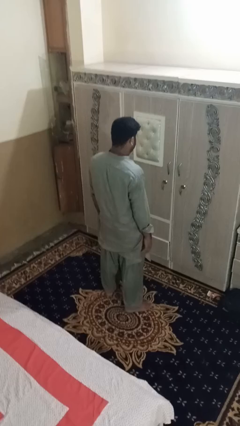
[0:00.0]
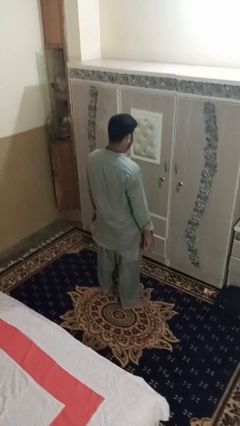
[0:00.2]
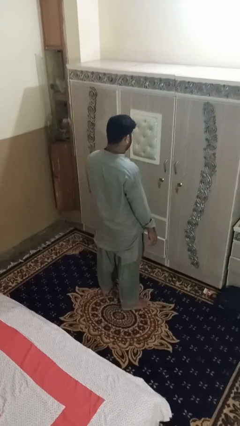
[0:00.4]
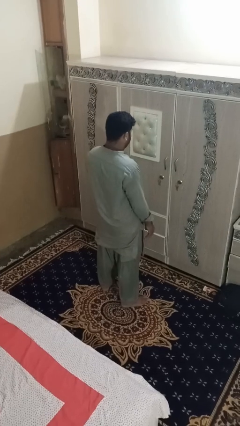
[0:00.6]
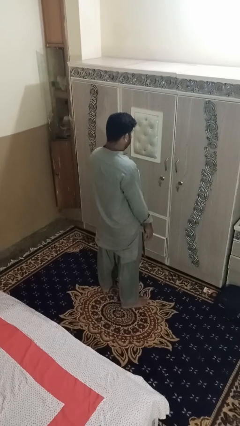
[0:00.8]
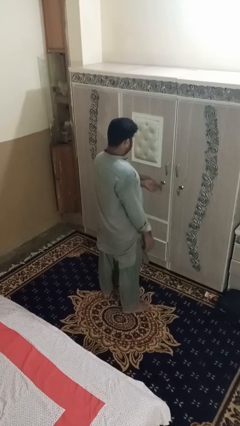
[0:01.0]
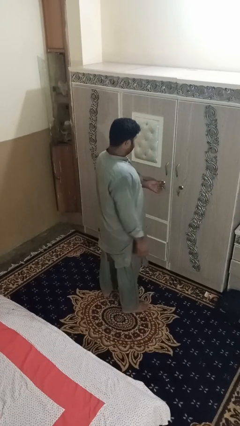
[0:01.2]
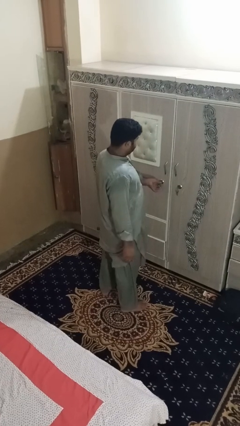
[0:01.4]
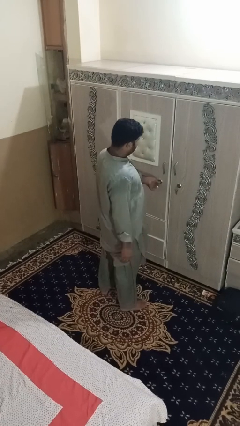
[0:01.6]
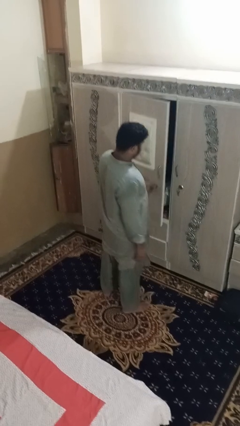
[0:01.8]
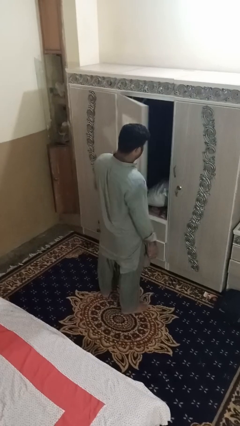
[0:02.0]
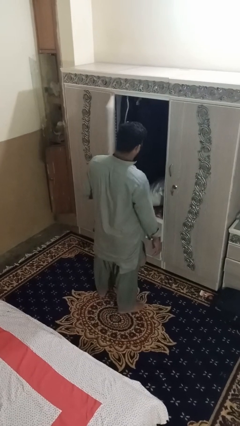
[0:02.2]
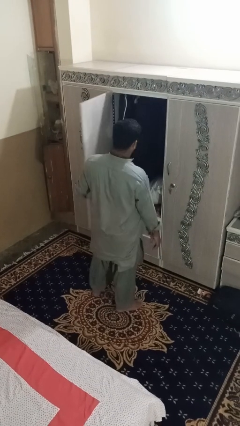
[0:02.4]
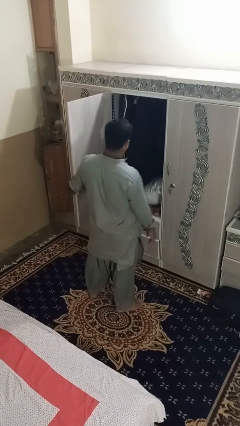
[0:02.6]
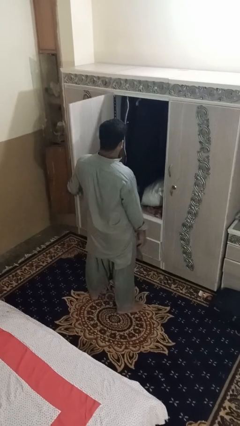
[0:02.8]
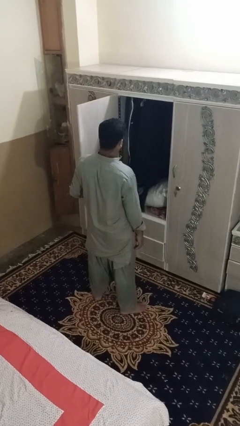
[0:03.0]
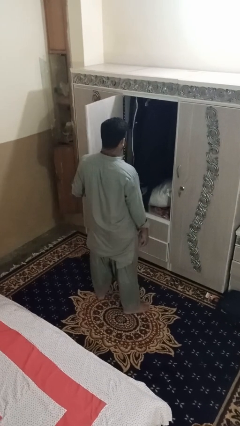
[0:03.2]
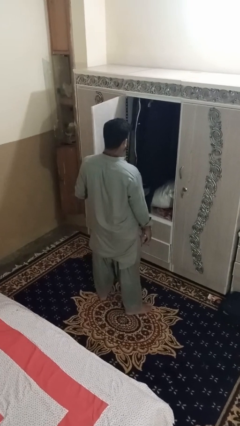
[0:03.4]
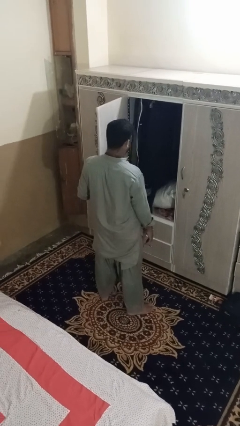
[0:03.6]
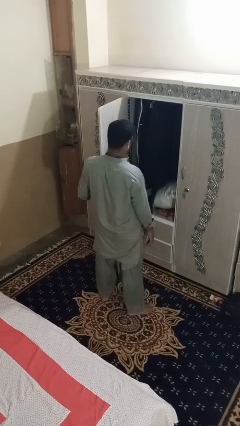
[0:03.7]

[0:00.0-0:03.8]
person opens dresser drawer

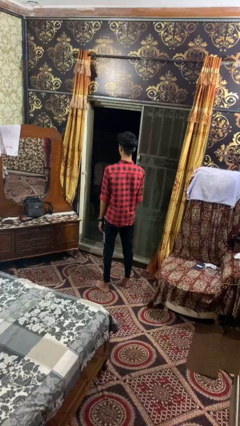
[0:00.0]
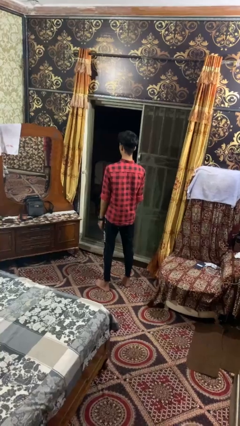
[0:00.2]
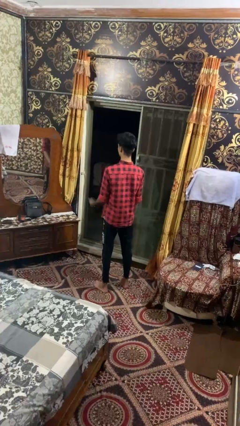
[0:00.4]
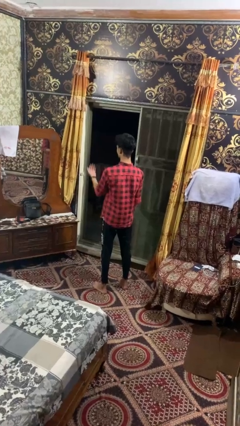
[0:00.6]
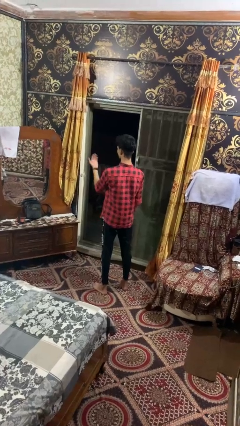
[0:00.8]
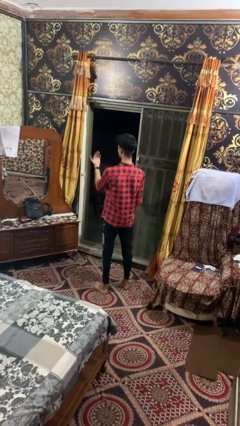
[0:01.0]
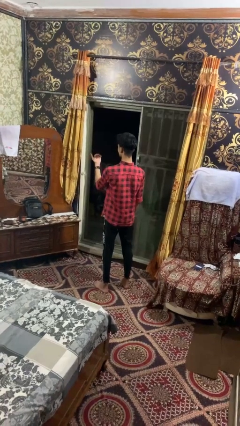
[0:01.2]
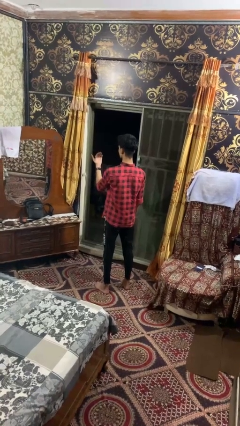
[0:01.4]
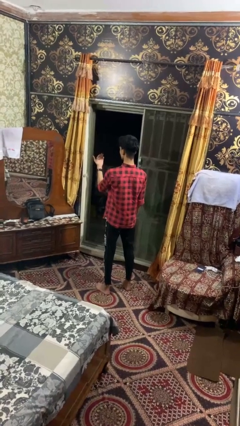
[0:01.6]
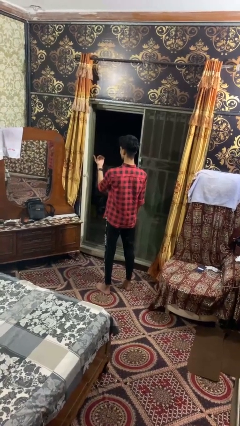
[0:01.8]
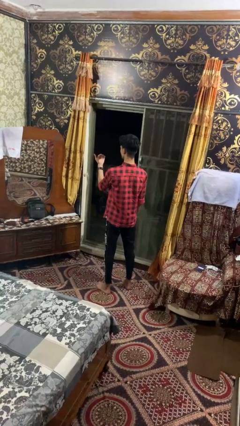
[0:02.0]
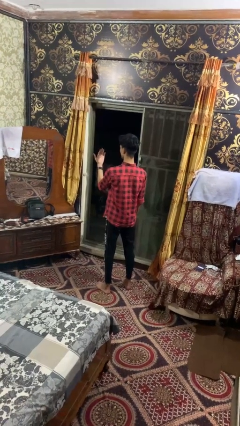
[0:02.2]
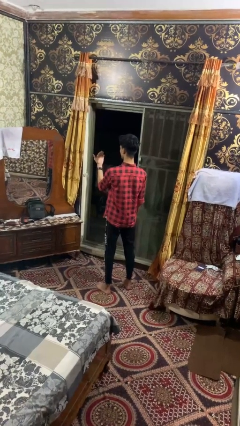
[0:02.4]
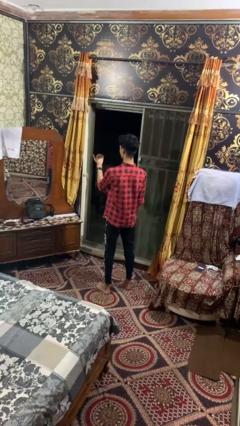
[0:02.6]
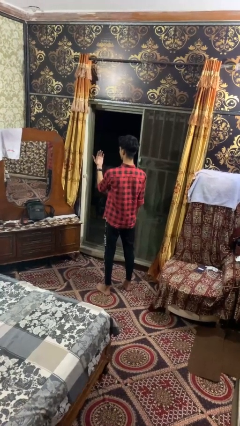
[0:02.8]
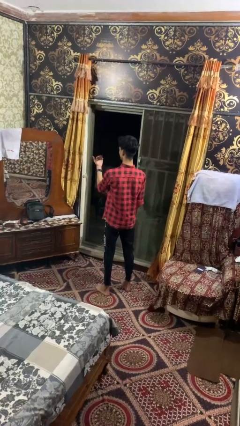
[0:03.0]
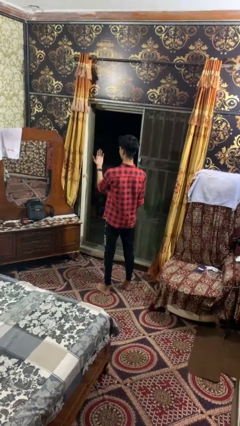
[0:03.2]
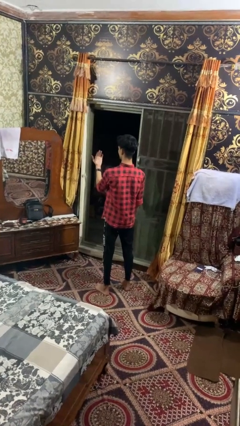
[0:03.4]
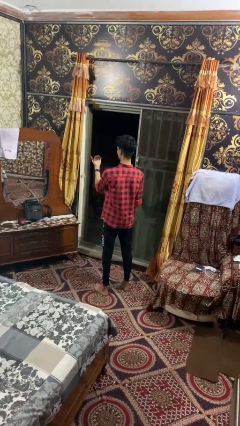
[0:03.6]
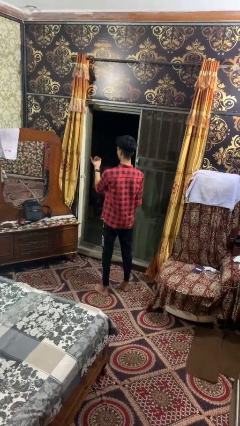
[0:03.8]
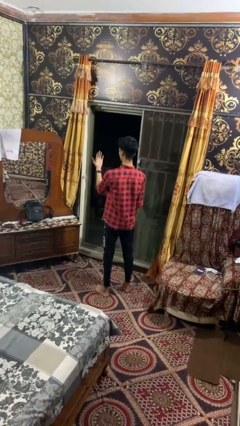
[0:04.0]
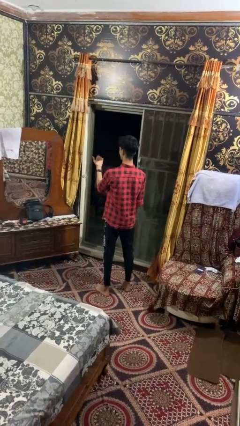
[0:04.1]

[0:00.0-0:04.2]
person gestures come here

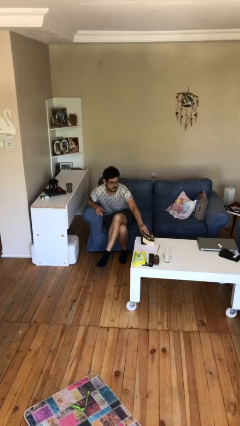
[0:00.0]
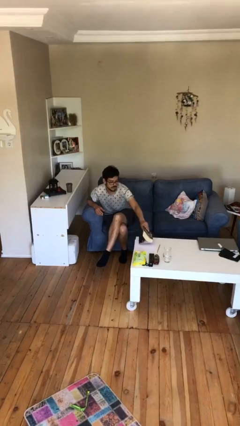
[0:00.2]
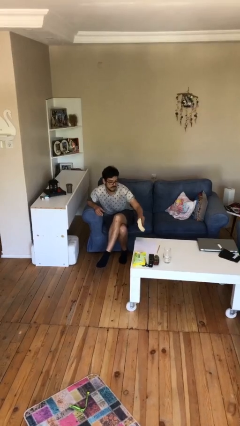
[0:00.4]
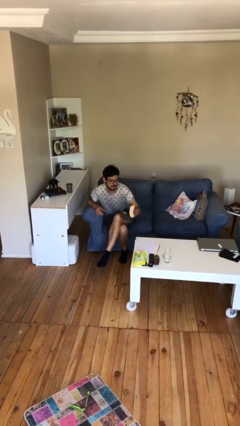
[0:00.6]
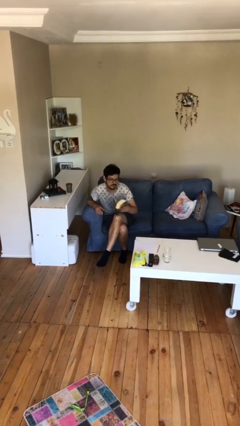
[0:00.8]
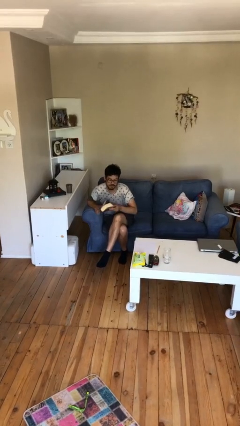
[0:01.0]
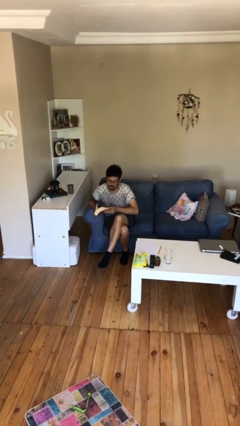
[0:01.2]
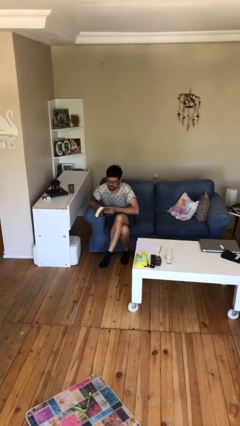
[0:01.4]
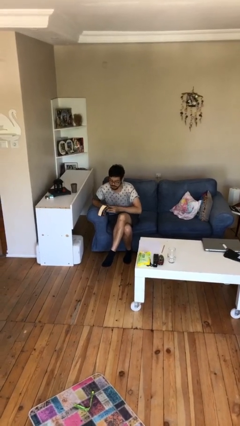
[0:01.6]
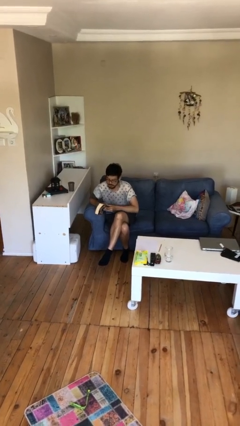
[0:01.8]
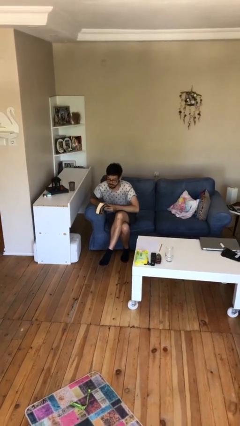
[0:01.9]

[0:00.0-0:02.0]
person picks up object from table

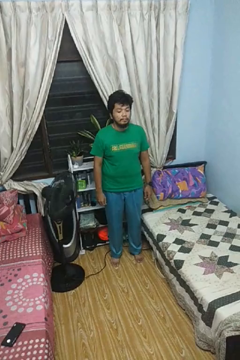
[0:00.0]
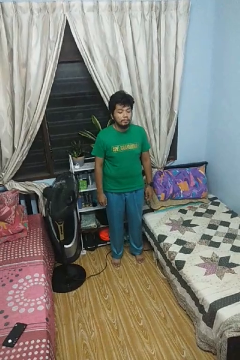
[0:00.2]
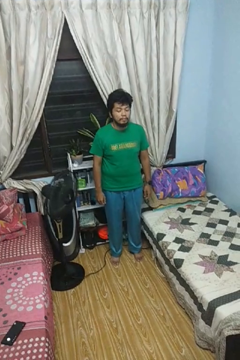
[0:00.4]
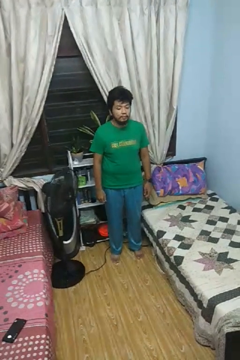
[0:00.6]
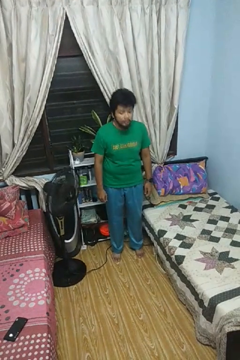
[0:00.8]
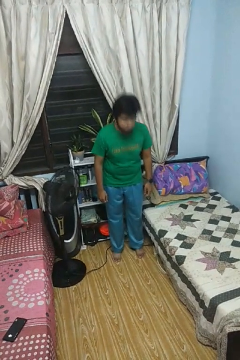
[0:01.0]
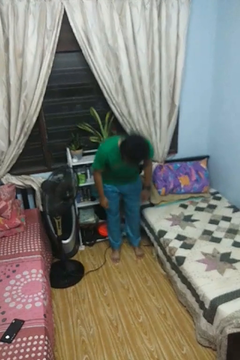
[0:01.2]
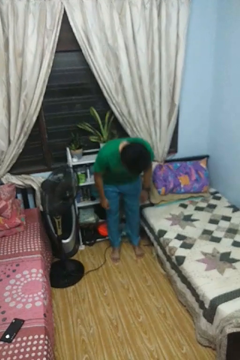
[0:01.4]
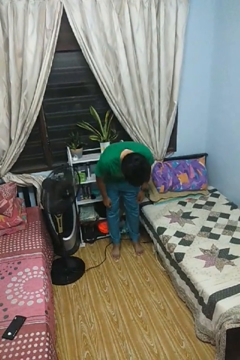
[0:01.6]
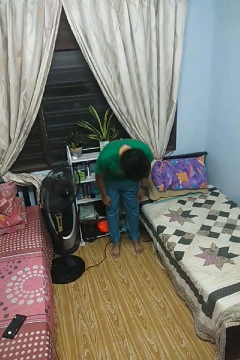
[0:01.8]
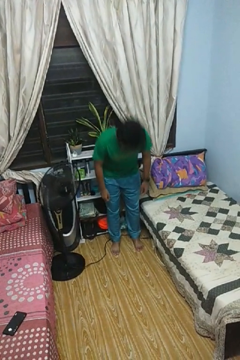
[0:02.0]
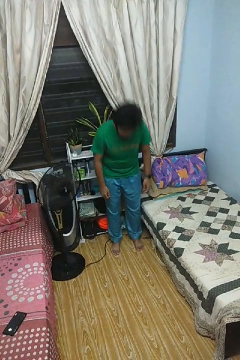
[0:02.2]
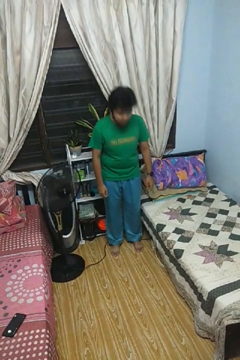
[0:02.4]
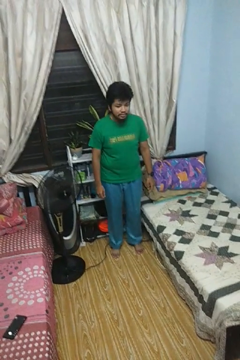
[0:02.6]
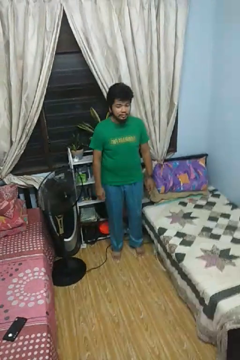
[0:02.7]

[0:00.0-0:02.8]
person bows

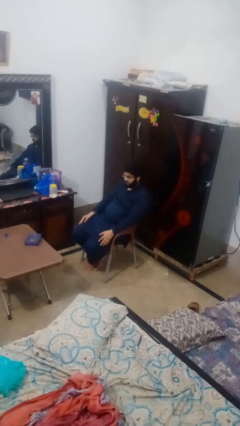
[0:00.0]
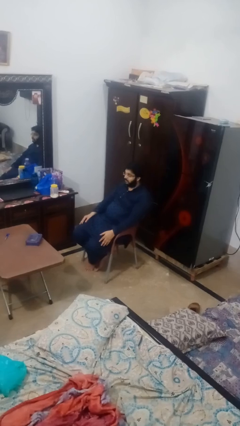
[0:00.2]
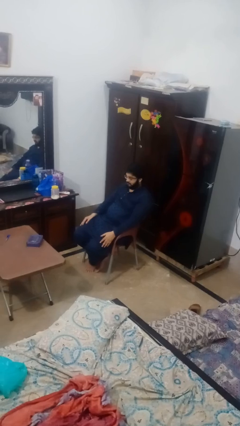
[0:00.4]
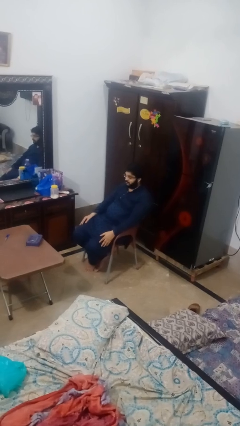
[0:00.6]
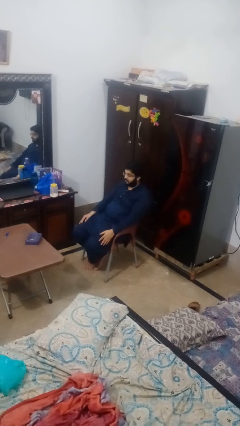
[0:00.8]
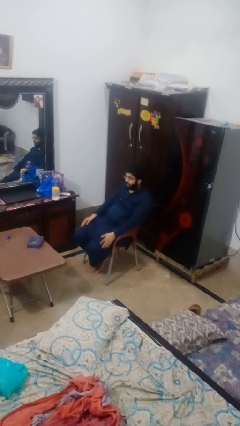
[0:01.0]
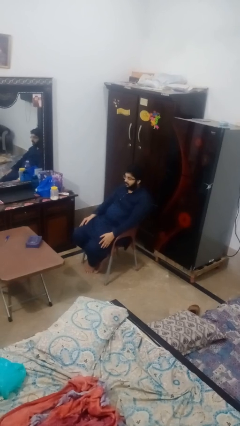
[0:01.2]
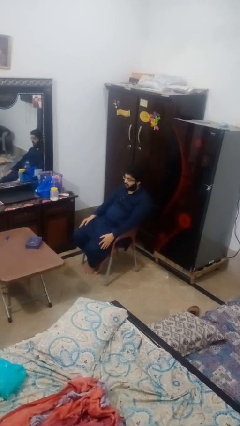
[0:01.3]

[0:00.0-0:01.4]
person nods head

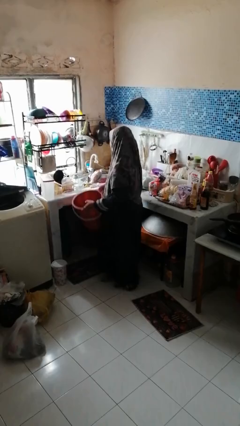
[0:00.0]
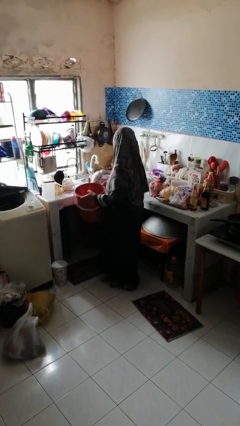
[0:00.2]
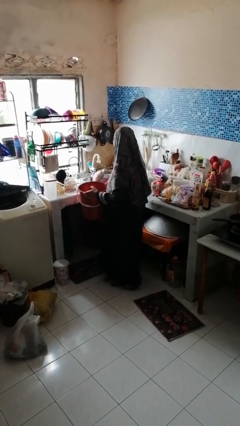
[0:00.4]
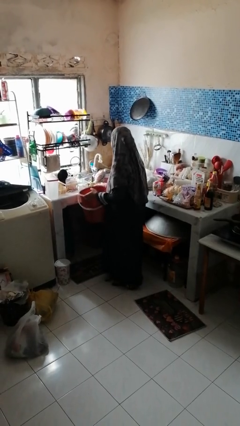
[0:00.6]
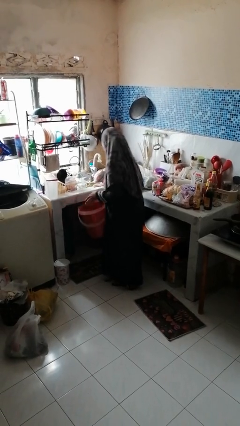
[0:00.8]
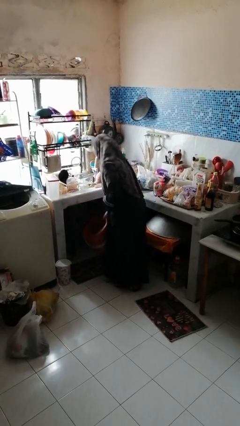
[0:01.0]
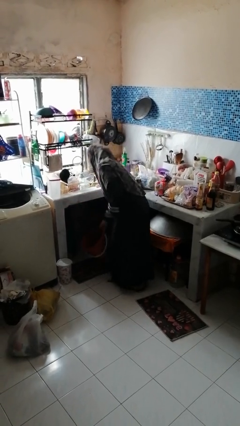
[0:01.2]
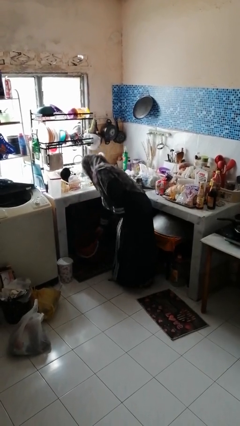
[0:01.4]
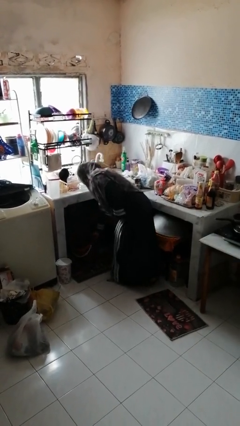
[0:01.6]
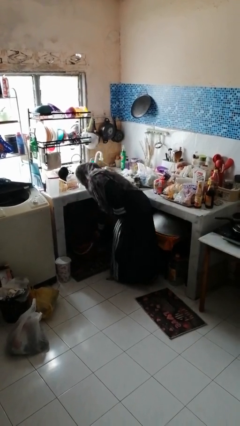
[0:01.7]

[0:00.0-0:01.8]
person puts down object into cabinet

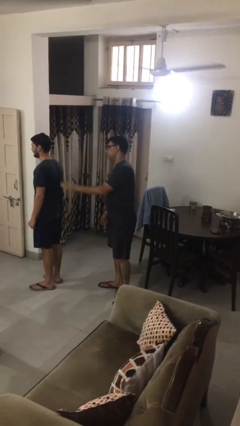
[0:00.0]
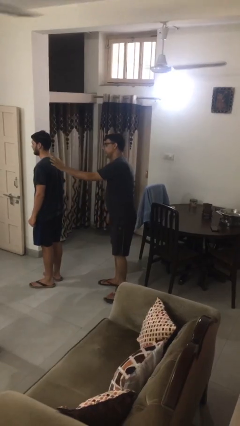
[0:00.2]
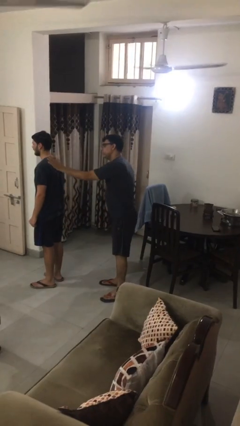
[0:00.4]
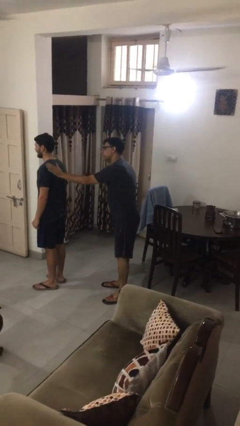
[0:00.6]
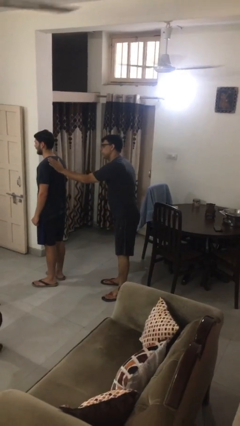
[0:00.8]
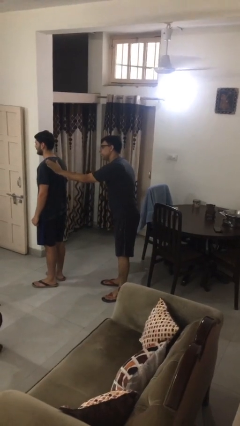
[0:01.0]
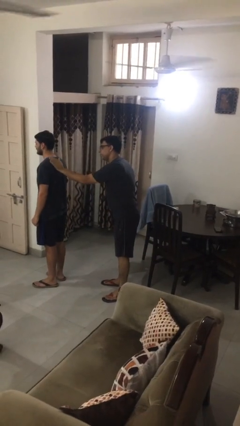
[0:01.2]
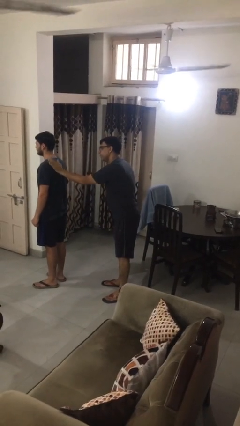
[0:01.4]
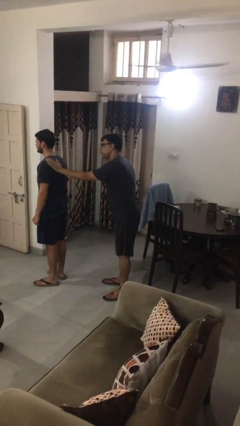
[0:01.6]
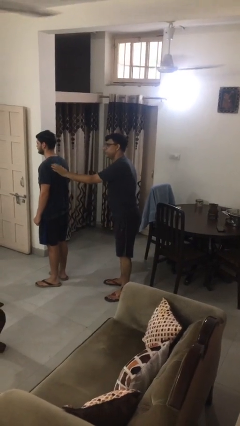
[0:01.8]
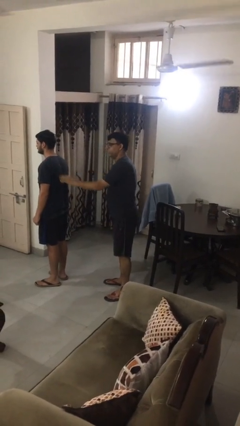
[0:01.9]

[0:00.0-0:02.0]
person touches back of person

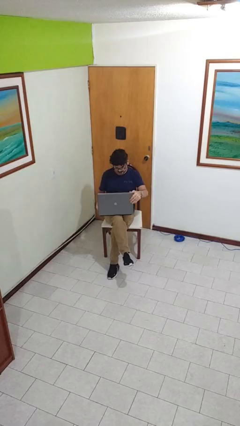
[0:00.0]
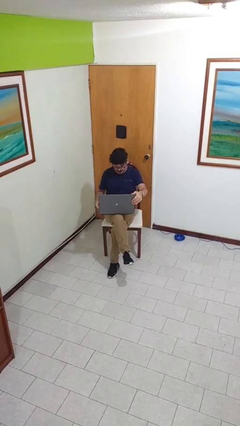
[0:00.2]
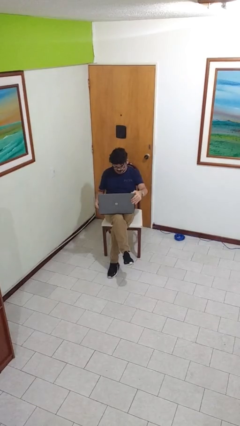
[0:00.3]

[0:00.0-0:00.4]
person opens laptop
